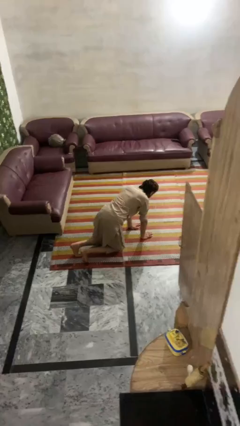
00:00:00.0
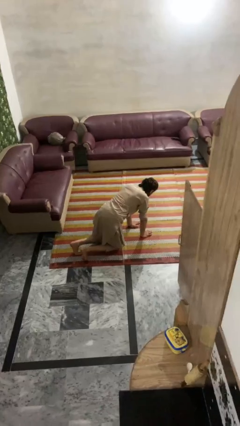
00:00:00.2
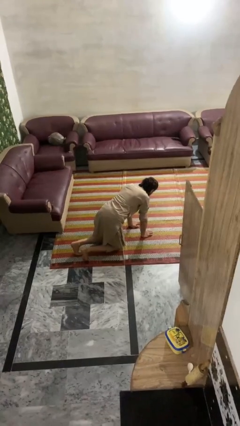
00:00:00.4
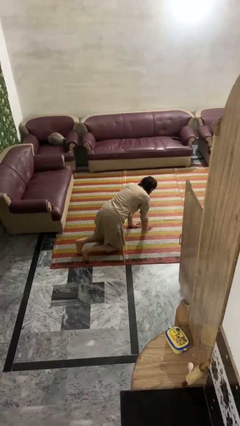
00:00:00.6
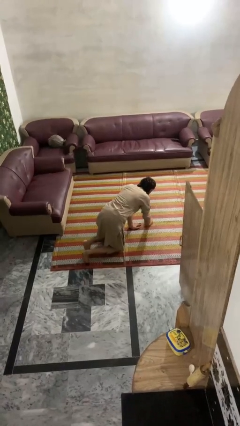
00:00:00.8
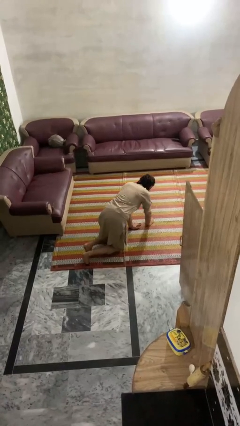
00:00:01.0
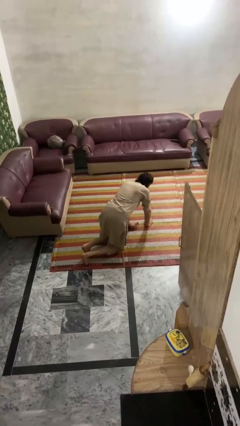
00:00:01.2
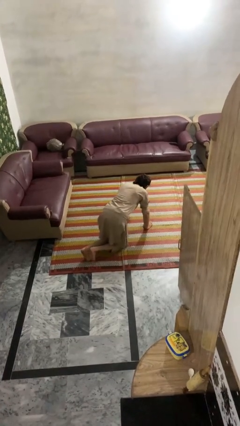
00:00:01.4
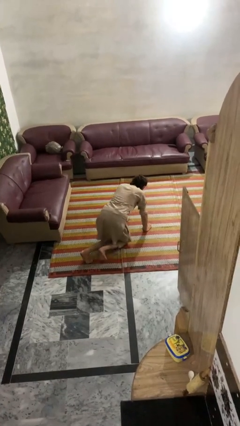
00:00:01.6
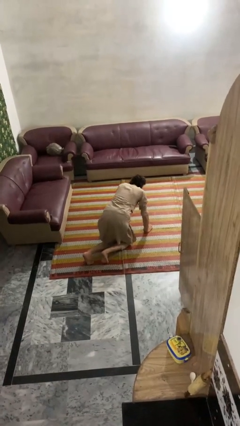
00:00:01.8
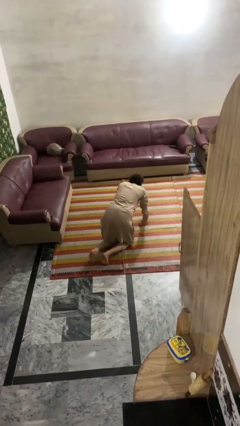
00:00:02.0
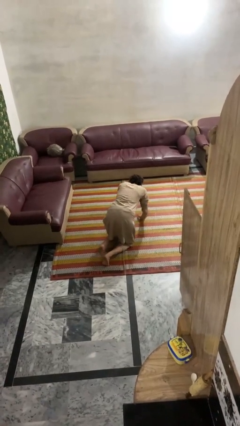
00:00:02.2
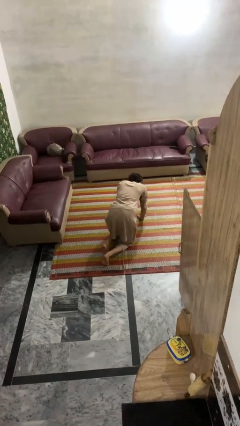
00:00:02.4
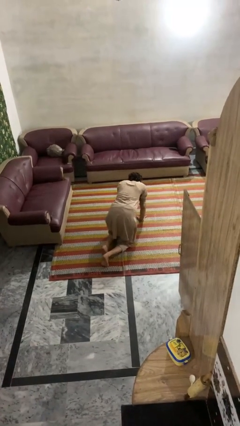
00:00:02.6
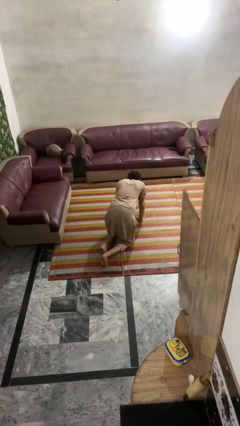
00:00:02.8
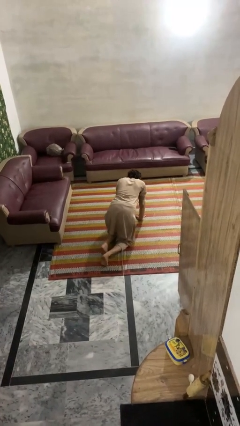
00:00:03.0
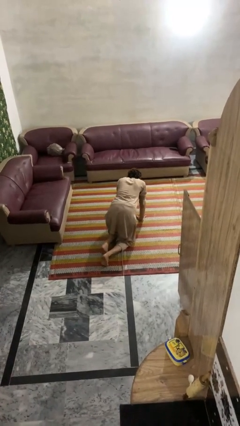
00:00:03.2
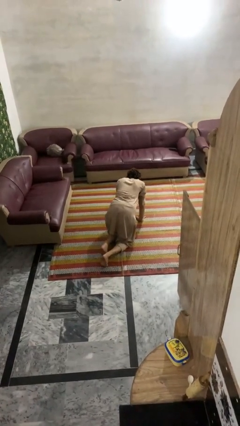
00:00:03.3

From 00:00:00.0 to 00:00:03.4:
person crawls

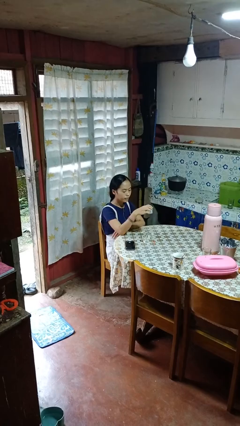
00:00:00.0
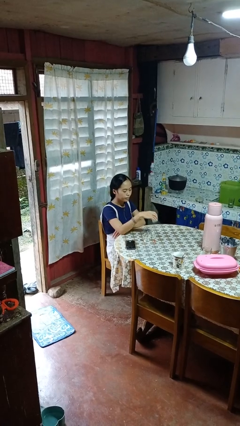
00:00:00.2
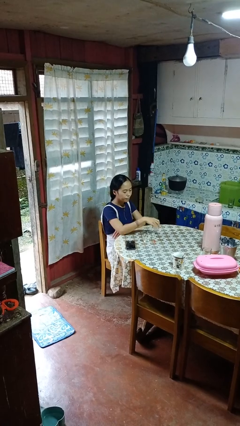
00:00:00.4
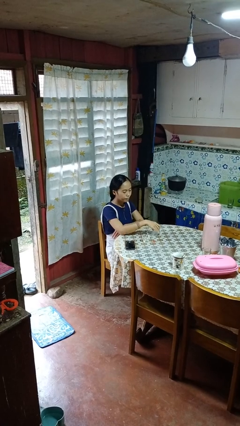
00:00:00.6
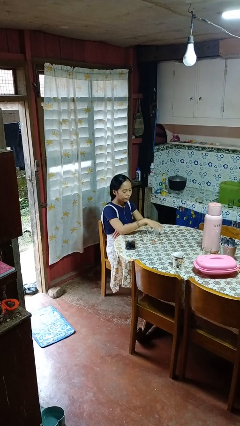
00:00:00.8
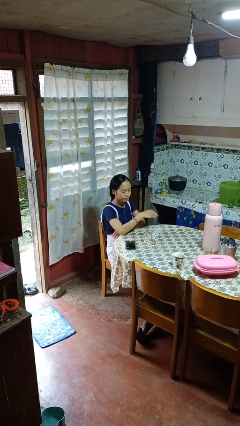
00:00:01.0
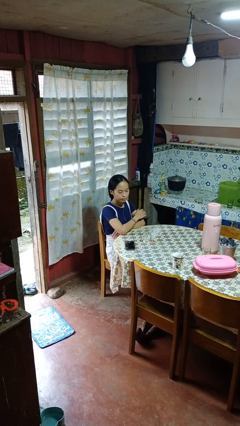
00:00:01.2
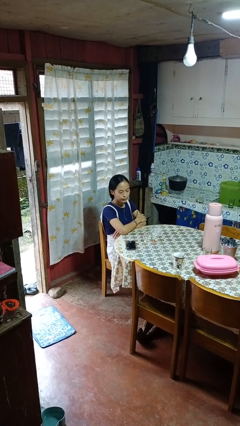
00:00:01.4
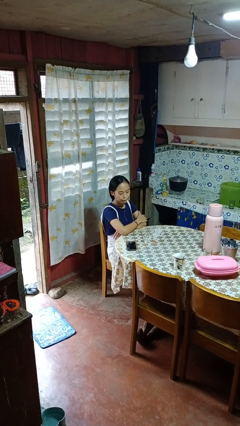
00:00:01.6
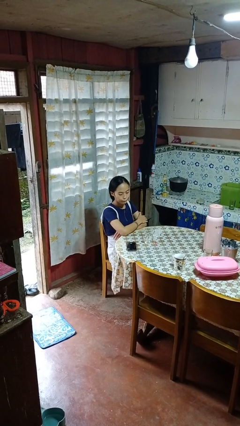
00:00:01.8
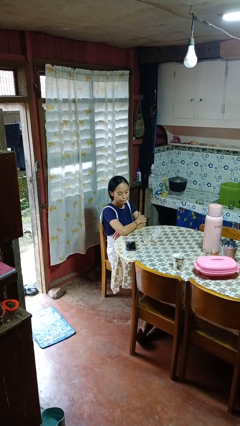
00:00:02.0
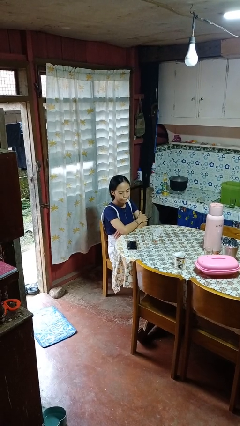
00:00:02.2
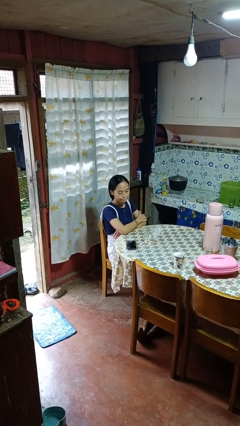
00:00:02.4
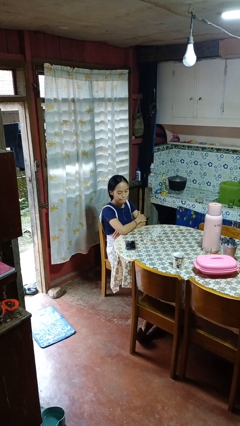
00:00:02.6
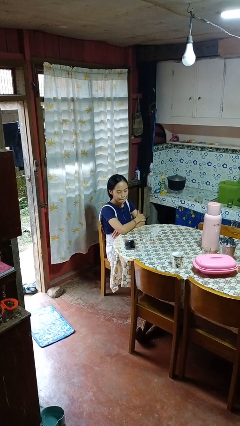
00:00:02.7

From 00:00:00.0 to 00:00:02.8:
person puts down object on table

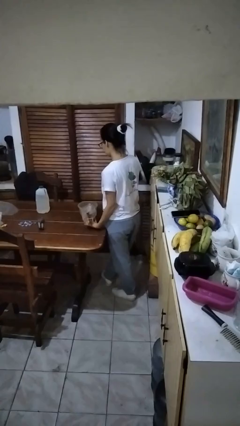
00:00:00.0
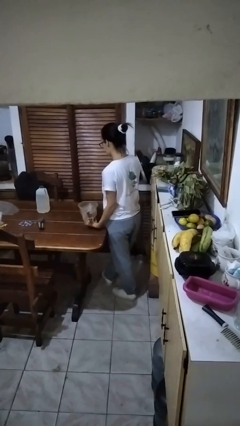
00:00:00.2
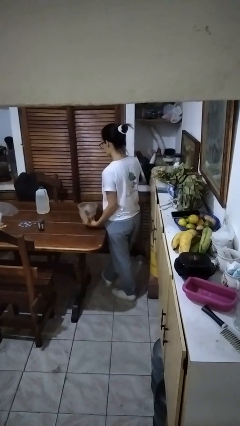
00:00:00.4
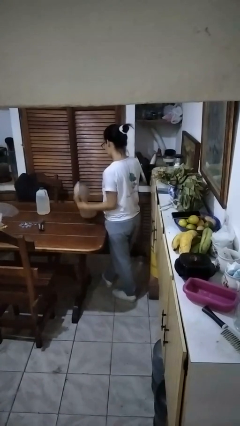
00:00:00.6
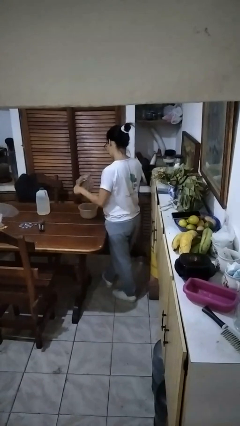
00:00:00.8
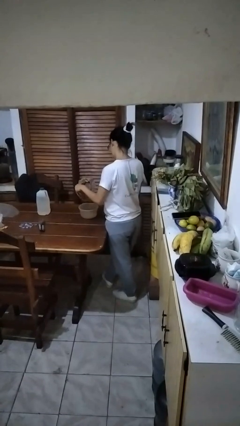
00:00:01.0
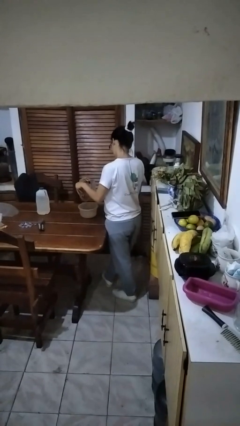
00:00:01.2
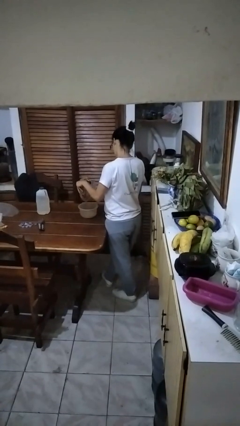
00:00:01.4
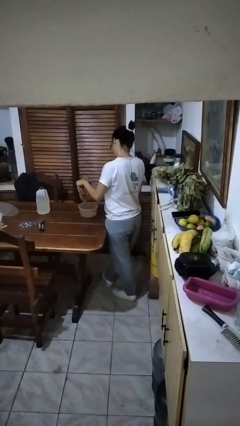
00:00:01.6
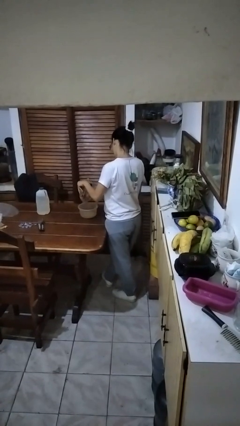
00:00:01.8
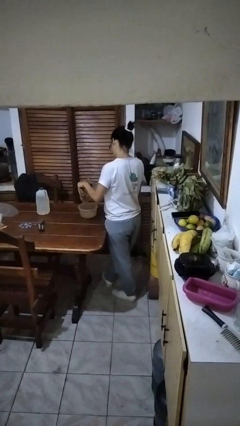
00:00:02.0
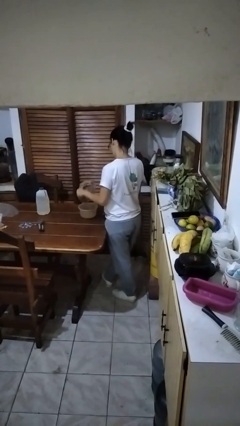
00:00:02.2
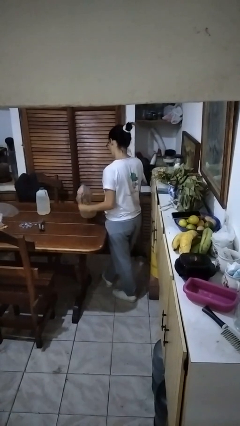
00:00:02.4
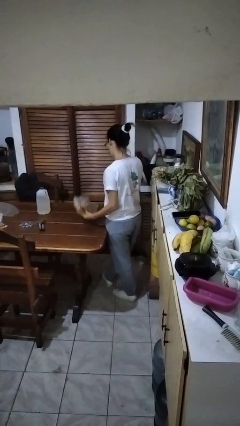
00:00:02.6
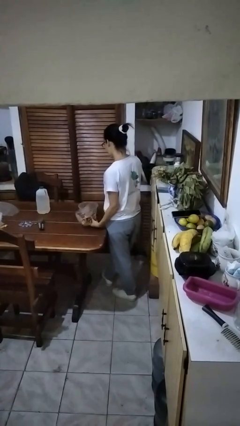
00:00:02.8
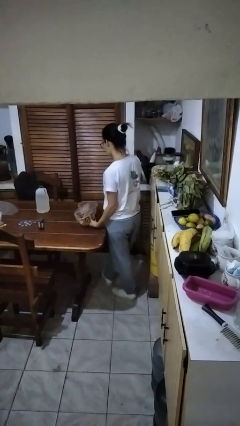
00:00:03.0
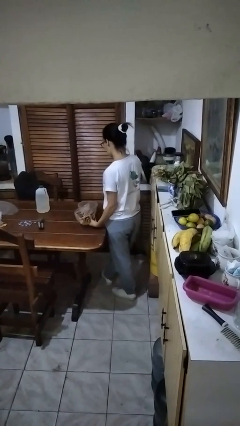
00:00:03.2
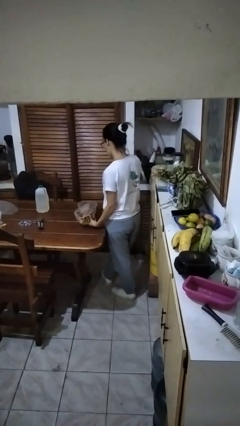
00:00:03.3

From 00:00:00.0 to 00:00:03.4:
person pours into bowl

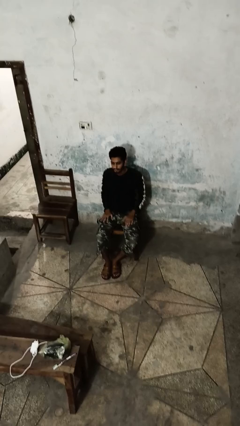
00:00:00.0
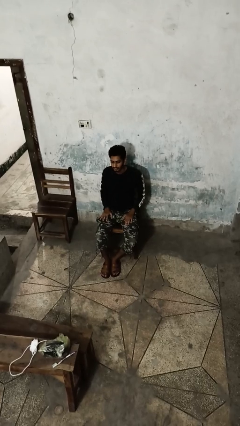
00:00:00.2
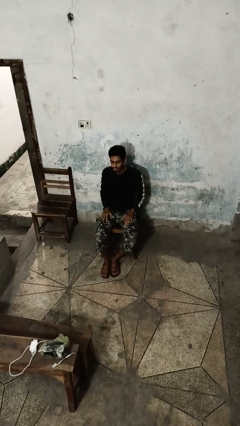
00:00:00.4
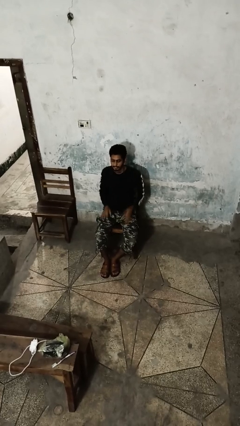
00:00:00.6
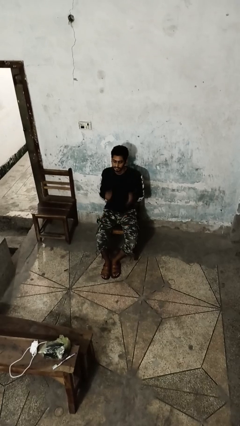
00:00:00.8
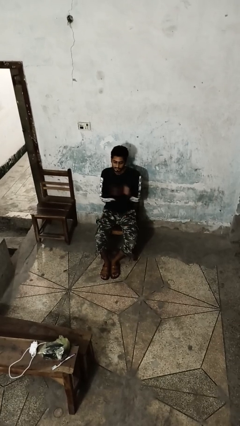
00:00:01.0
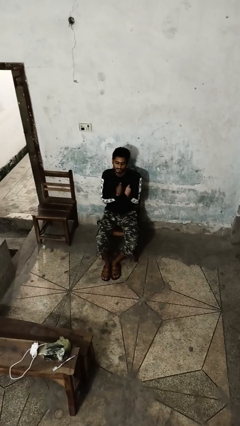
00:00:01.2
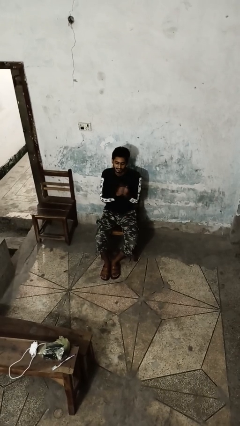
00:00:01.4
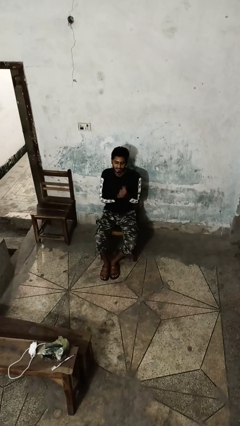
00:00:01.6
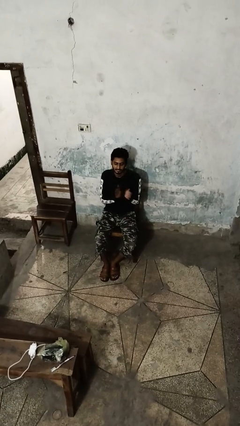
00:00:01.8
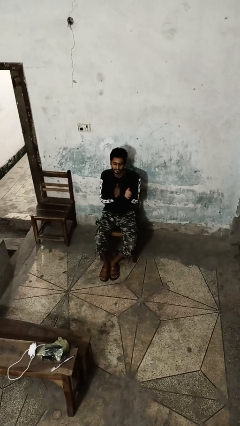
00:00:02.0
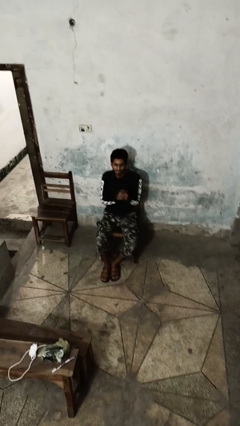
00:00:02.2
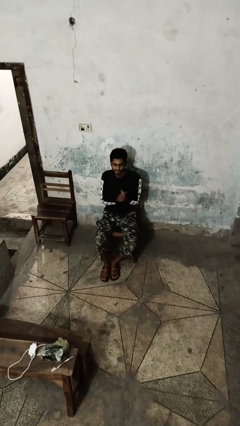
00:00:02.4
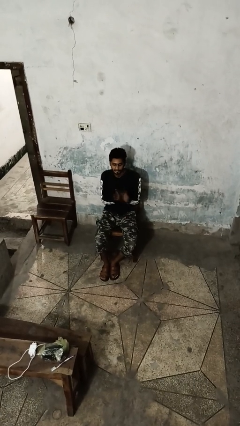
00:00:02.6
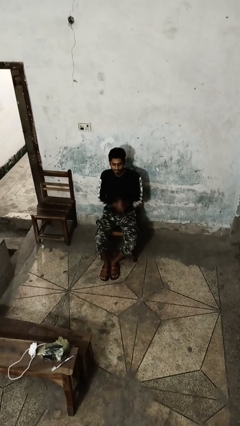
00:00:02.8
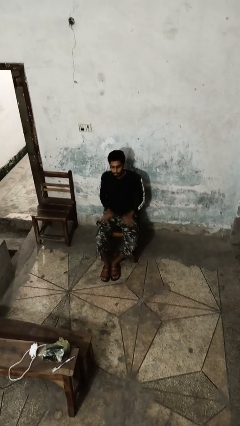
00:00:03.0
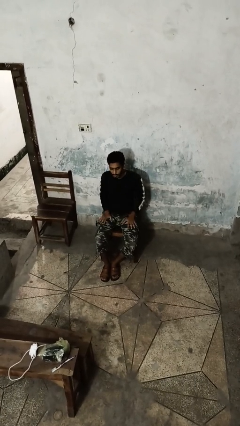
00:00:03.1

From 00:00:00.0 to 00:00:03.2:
person claps hands

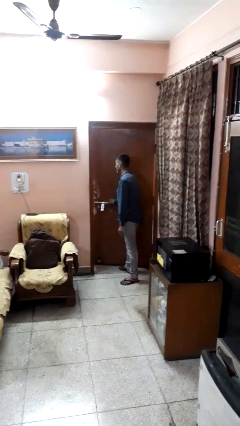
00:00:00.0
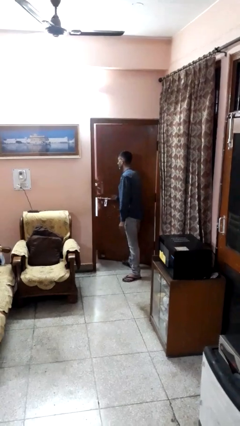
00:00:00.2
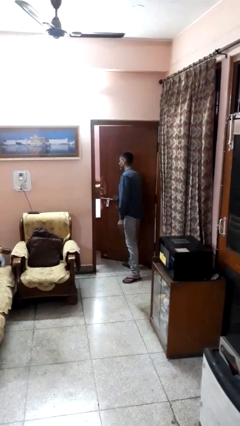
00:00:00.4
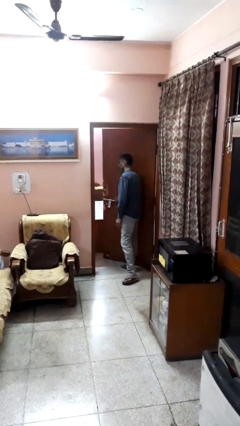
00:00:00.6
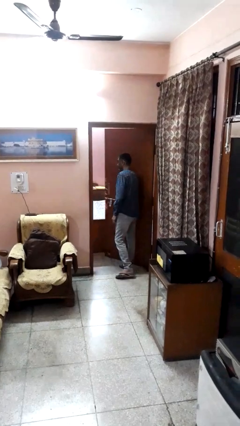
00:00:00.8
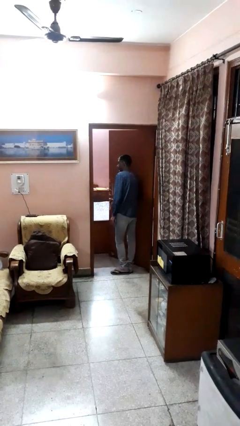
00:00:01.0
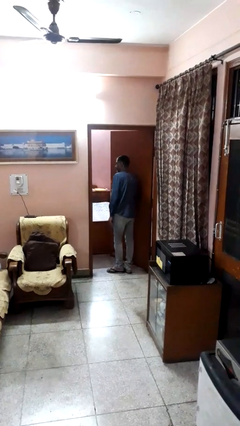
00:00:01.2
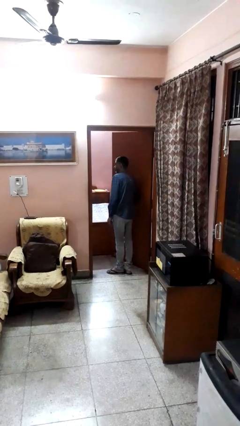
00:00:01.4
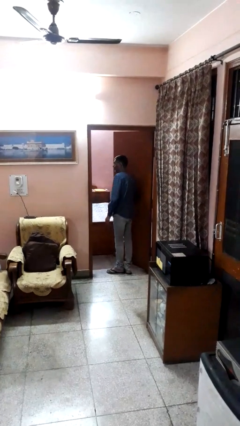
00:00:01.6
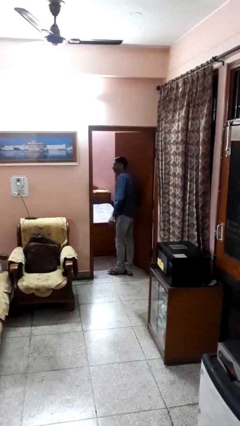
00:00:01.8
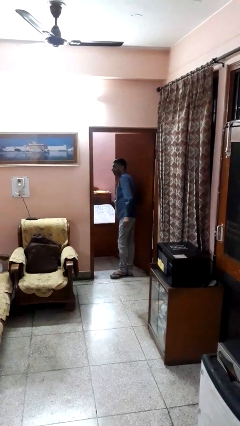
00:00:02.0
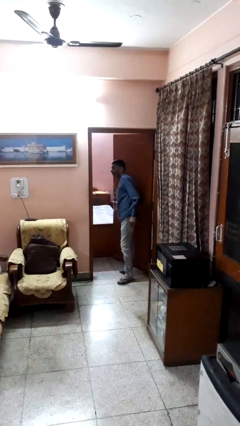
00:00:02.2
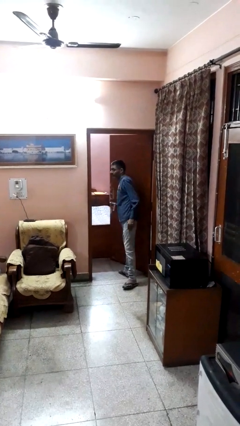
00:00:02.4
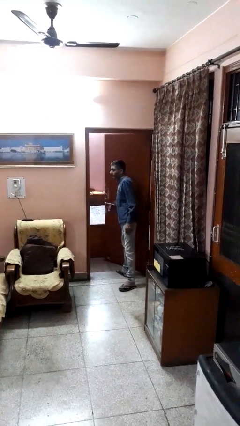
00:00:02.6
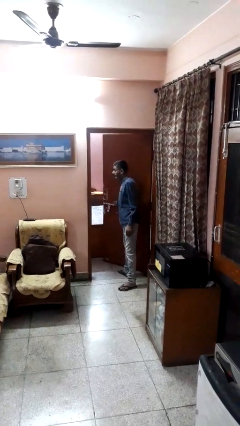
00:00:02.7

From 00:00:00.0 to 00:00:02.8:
person opens facility door

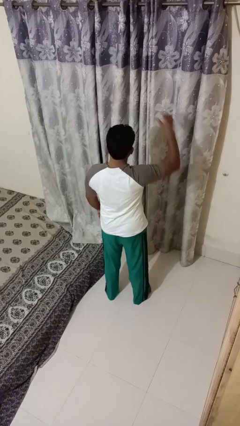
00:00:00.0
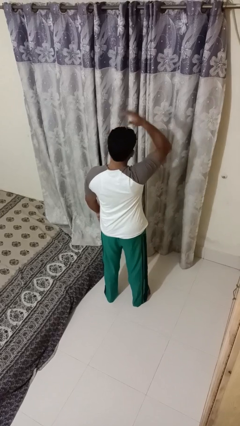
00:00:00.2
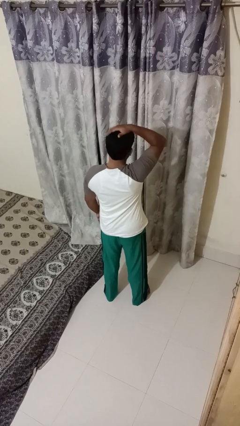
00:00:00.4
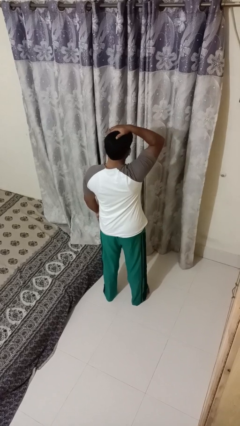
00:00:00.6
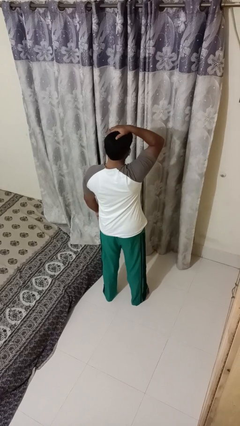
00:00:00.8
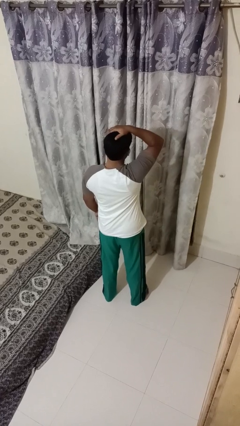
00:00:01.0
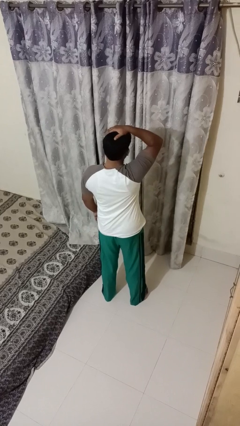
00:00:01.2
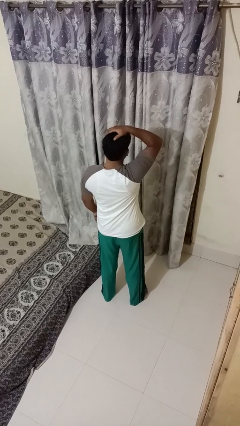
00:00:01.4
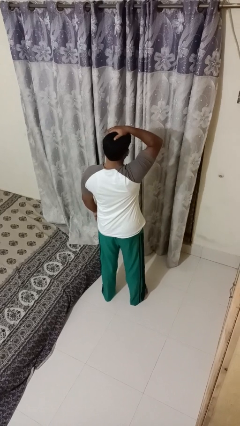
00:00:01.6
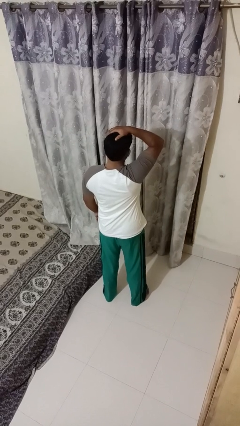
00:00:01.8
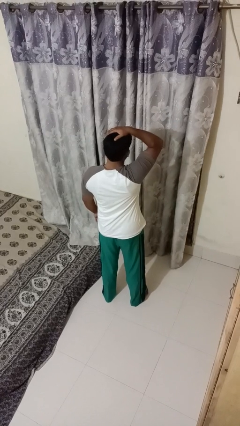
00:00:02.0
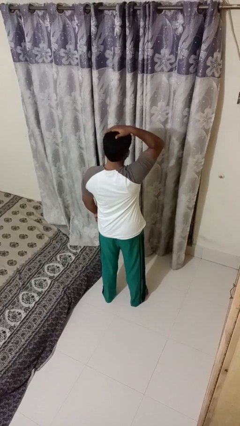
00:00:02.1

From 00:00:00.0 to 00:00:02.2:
person pats head
